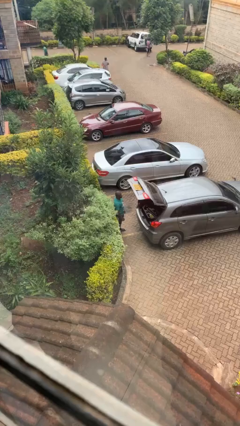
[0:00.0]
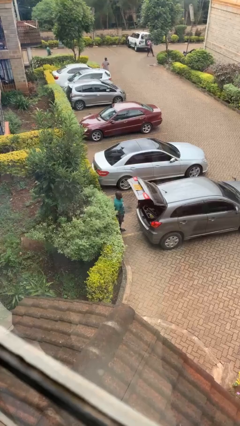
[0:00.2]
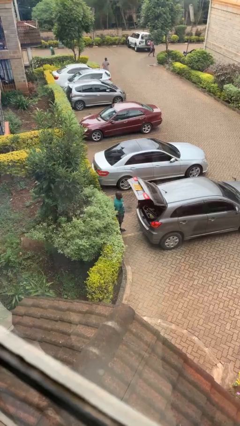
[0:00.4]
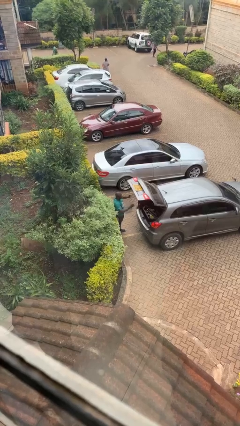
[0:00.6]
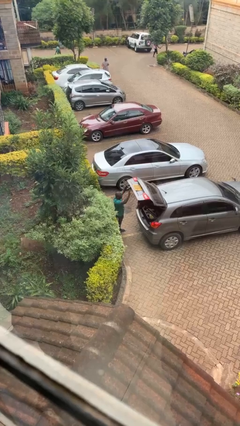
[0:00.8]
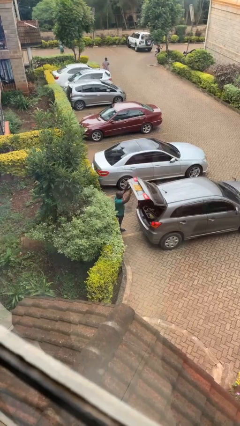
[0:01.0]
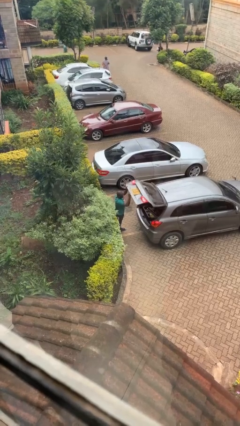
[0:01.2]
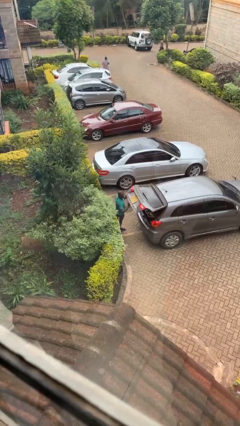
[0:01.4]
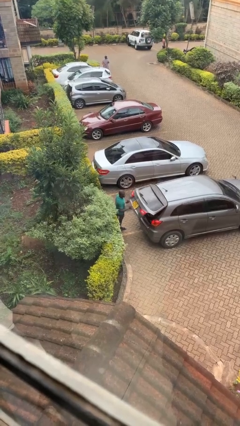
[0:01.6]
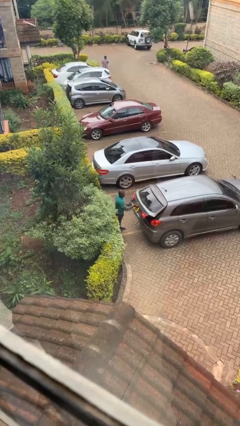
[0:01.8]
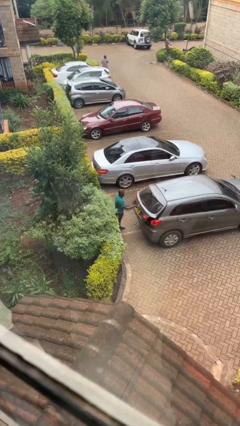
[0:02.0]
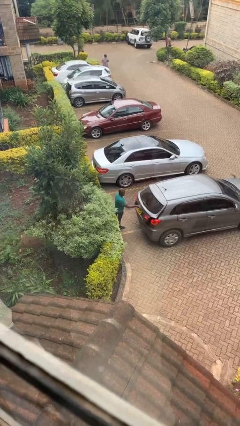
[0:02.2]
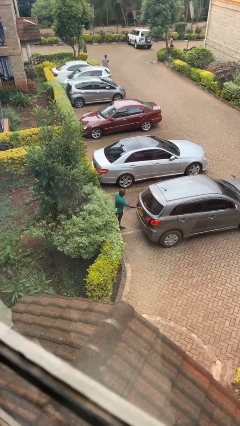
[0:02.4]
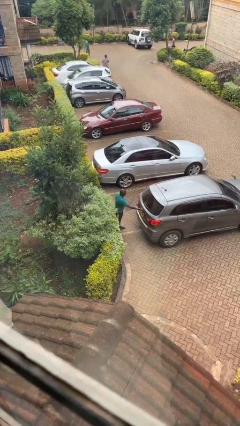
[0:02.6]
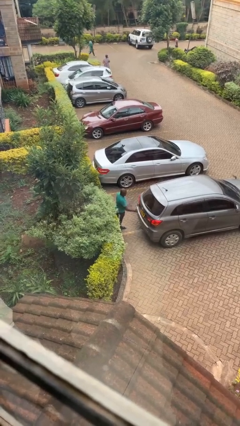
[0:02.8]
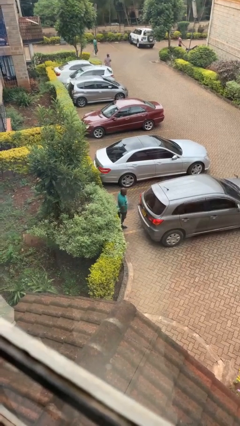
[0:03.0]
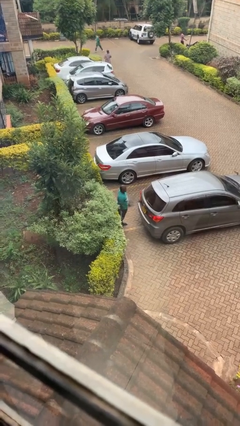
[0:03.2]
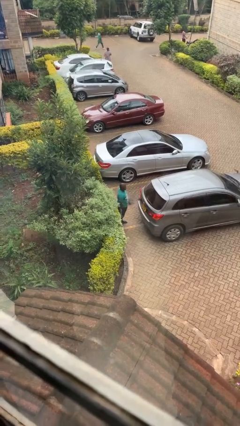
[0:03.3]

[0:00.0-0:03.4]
person closes car trunk

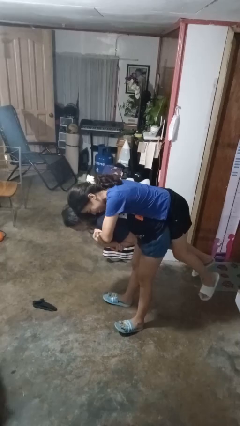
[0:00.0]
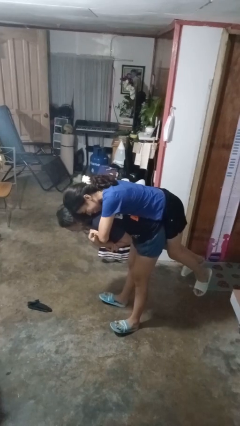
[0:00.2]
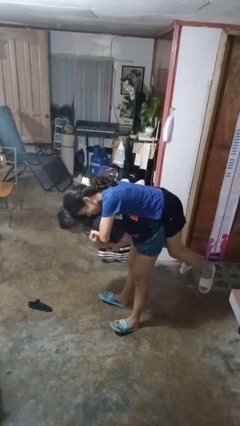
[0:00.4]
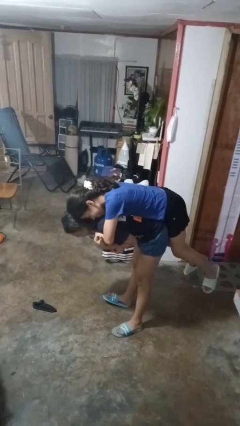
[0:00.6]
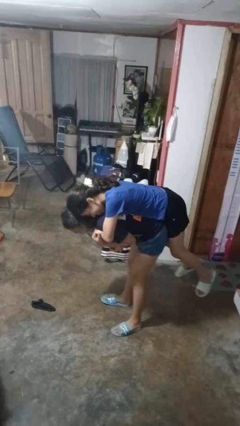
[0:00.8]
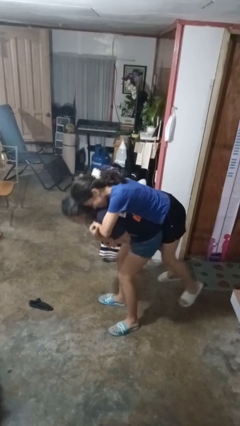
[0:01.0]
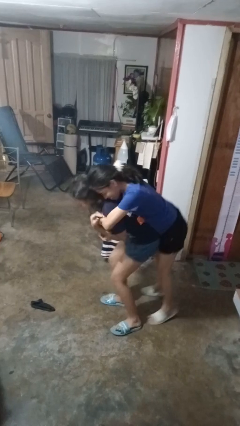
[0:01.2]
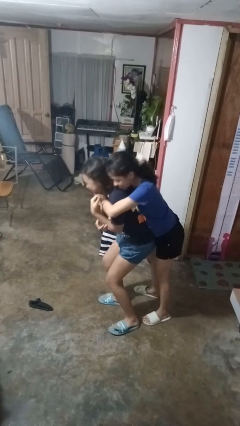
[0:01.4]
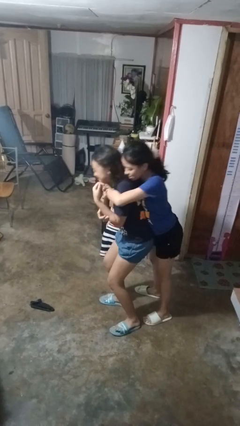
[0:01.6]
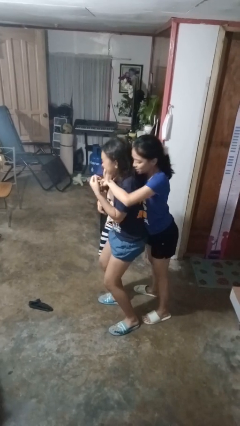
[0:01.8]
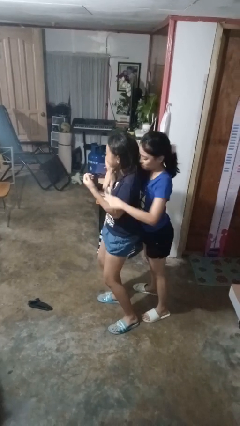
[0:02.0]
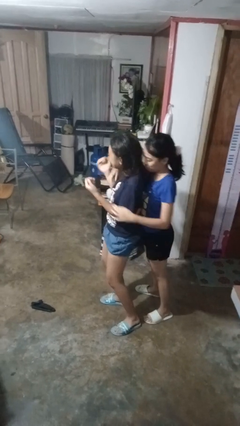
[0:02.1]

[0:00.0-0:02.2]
person puts down person

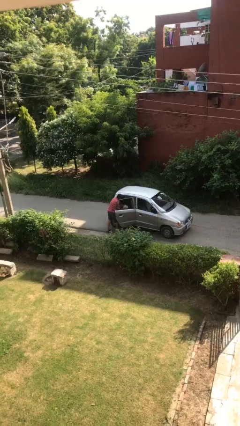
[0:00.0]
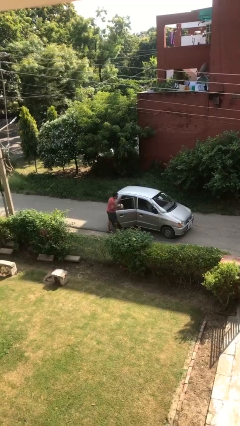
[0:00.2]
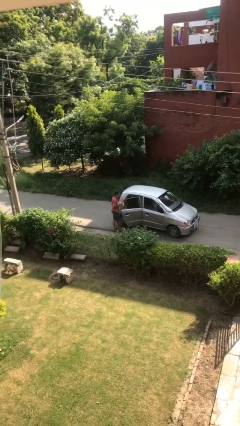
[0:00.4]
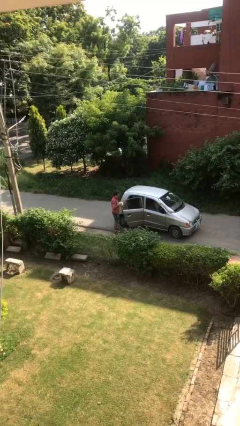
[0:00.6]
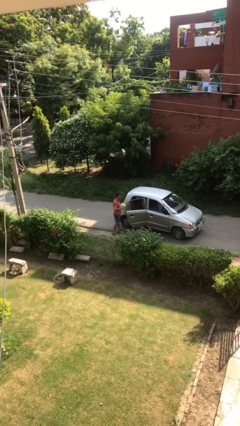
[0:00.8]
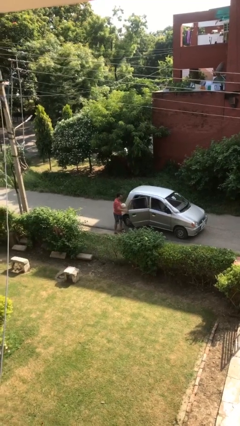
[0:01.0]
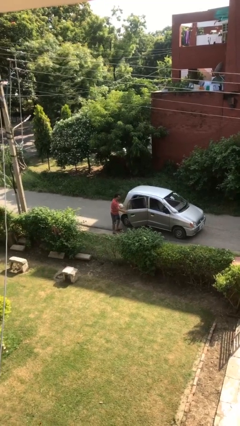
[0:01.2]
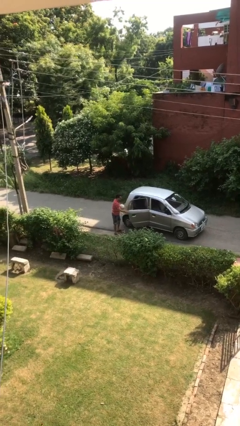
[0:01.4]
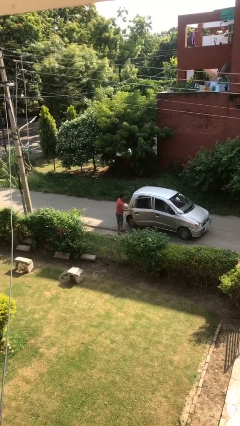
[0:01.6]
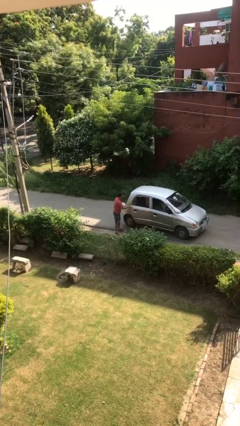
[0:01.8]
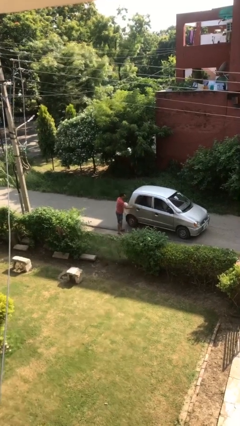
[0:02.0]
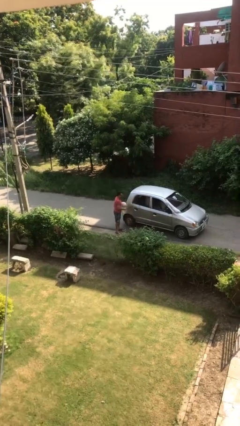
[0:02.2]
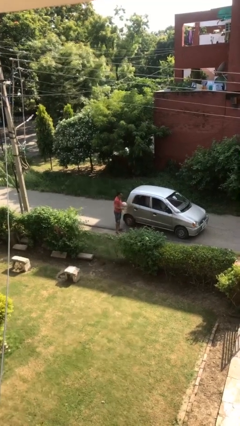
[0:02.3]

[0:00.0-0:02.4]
person unloads car

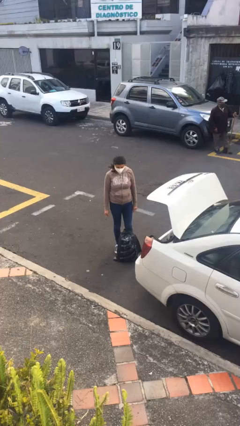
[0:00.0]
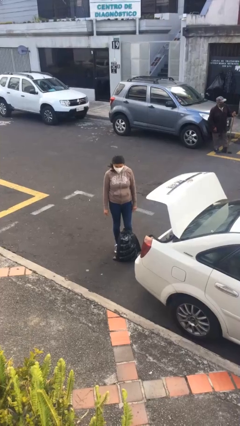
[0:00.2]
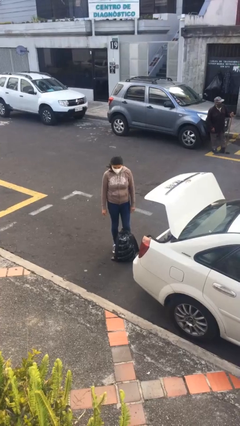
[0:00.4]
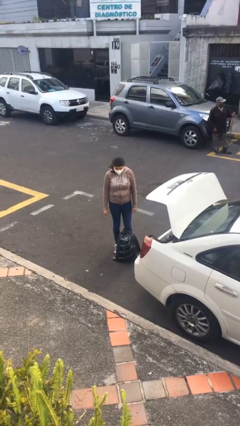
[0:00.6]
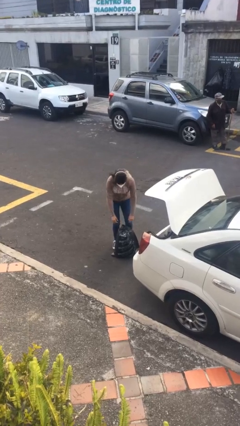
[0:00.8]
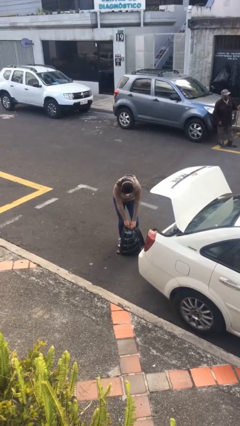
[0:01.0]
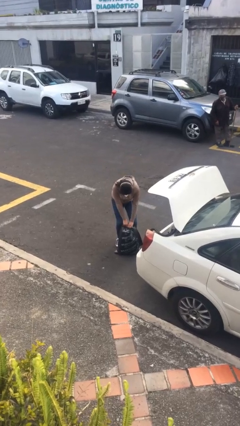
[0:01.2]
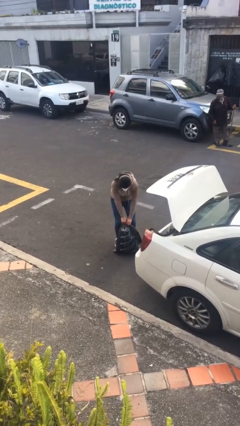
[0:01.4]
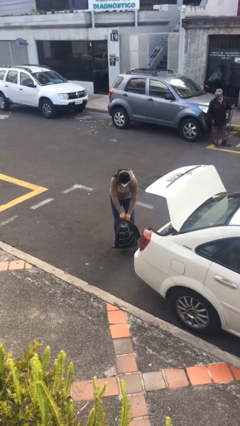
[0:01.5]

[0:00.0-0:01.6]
person picks up object from floor

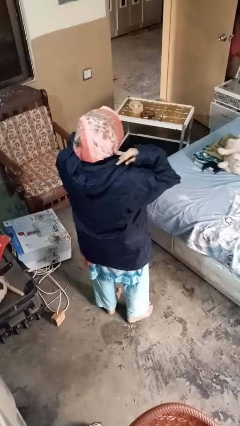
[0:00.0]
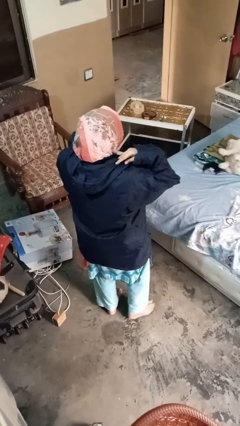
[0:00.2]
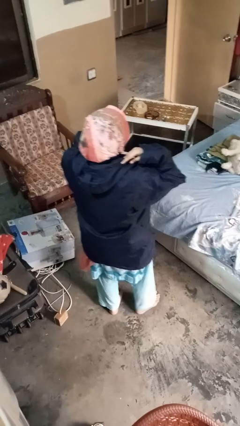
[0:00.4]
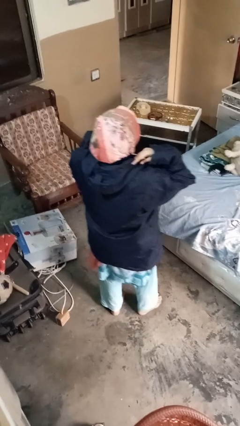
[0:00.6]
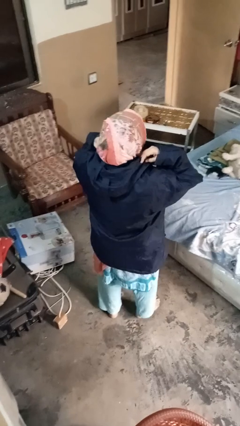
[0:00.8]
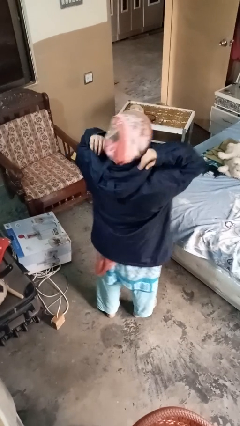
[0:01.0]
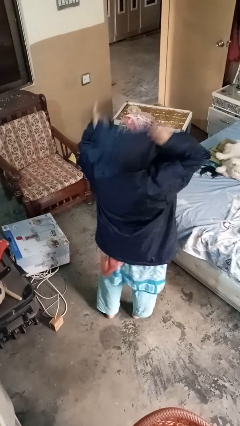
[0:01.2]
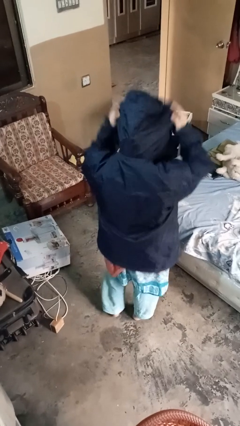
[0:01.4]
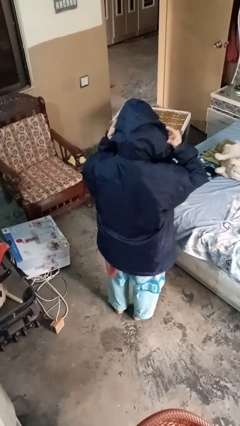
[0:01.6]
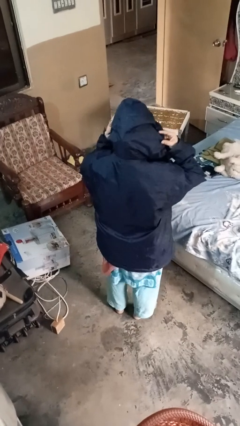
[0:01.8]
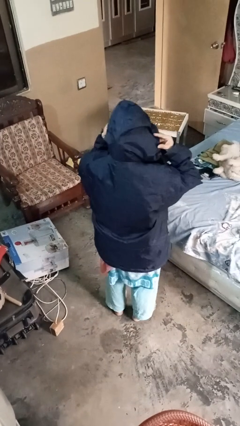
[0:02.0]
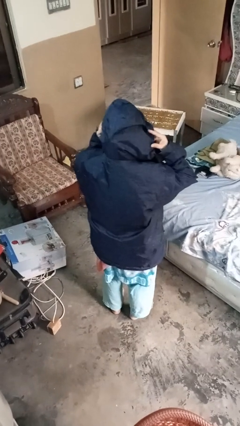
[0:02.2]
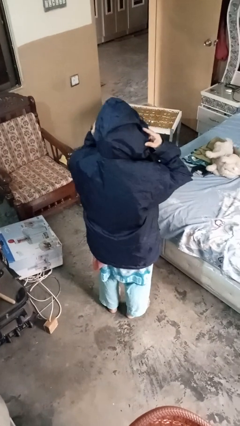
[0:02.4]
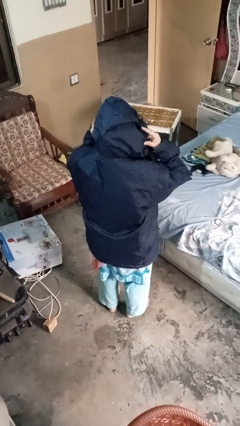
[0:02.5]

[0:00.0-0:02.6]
person puts on hoodie

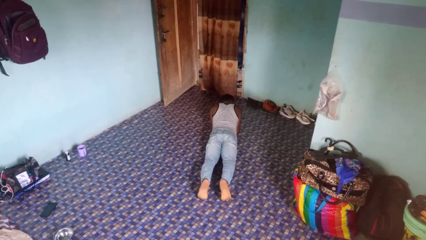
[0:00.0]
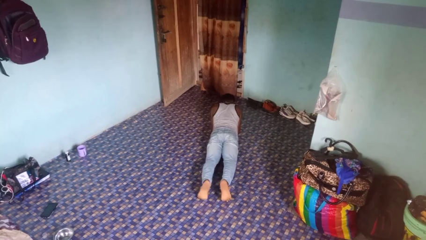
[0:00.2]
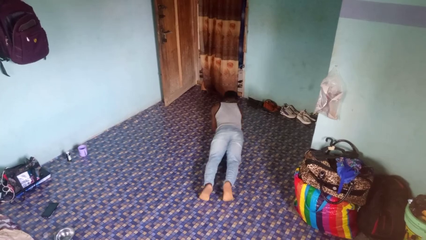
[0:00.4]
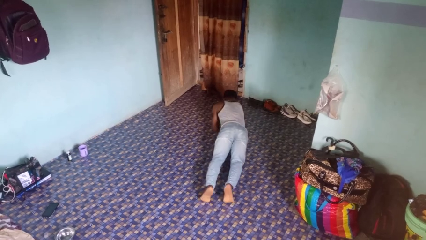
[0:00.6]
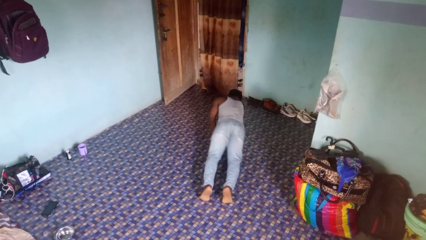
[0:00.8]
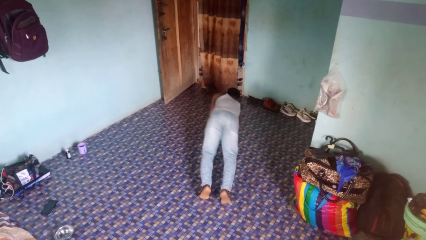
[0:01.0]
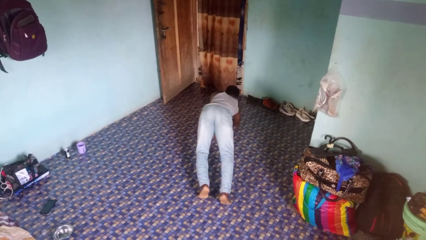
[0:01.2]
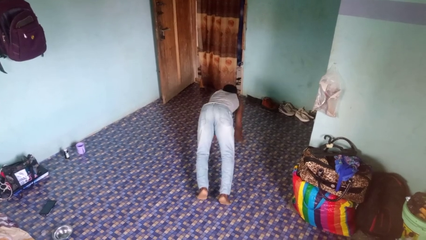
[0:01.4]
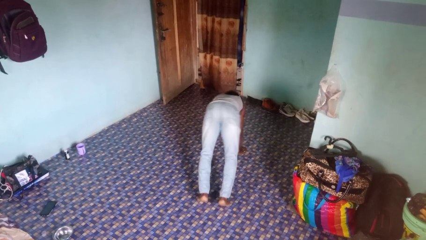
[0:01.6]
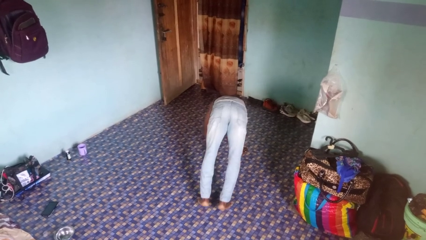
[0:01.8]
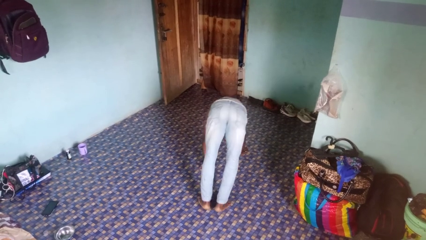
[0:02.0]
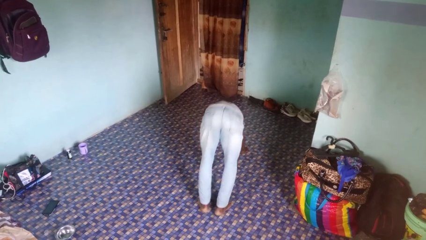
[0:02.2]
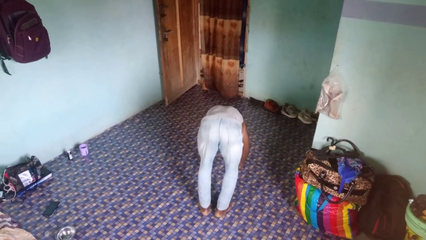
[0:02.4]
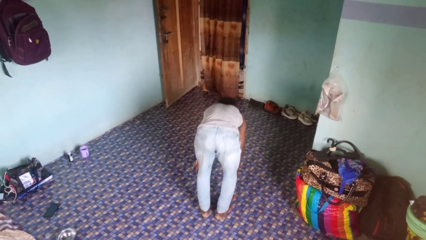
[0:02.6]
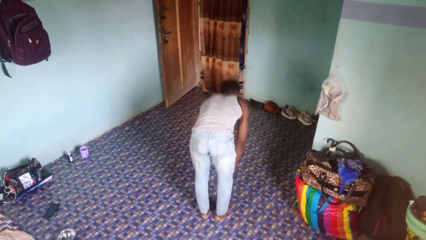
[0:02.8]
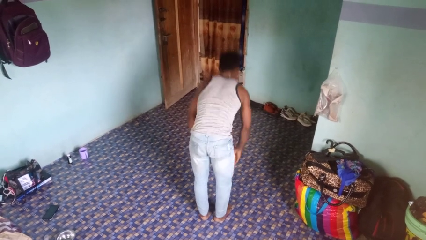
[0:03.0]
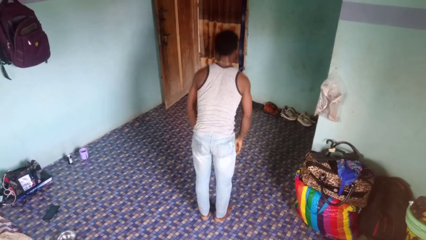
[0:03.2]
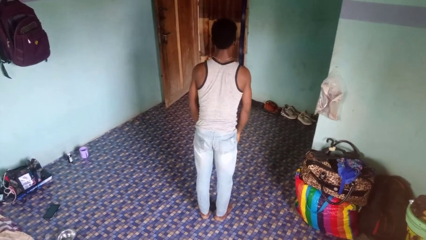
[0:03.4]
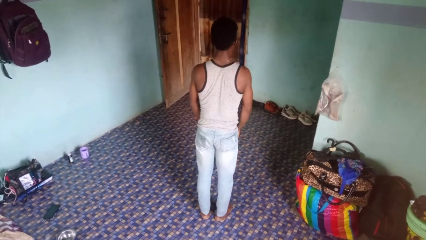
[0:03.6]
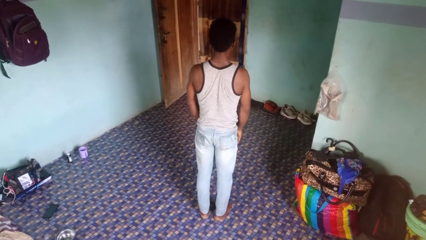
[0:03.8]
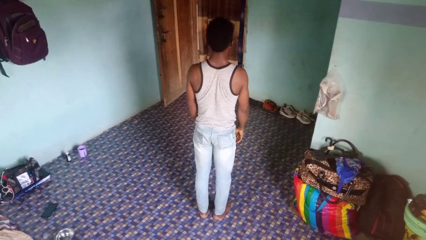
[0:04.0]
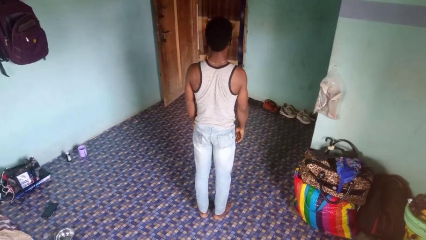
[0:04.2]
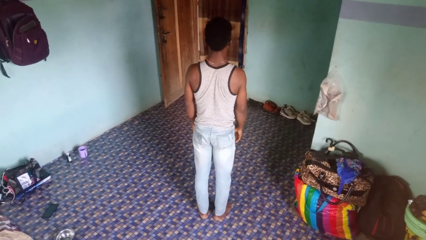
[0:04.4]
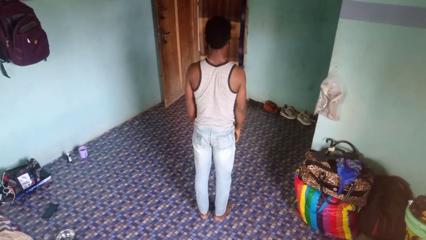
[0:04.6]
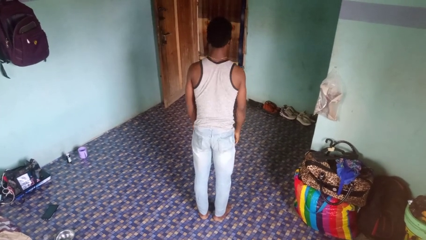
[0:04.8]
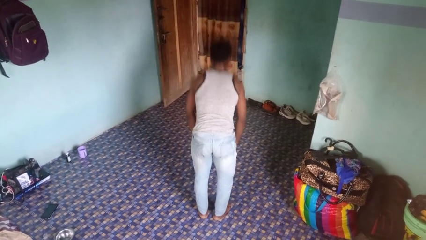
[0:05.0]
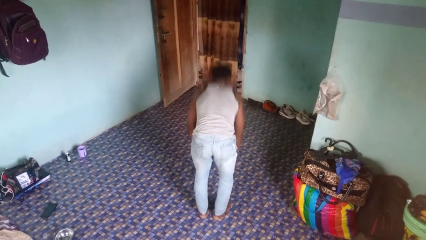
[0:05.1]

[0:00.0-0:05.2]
person stands up from floor
